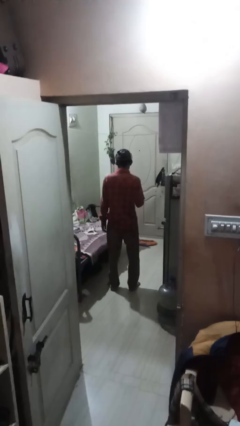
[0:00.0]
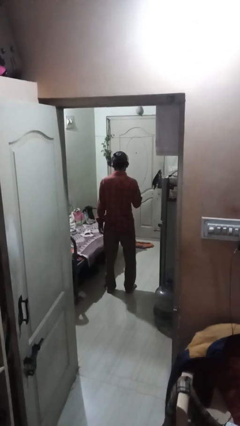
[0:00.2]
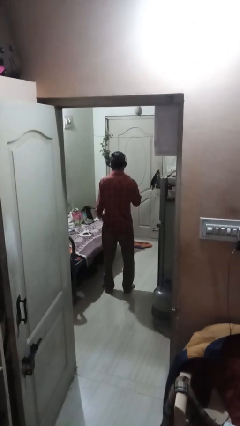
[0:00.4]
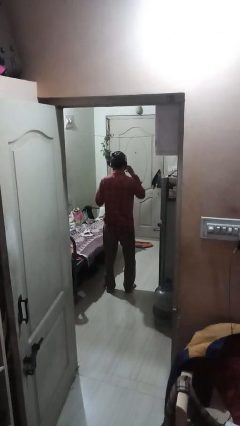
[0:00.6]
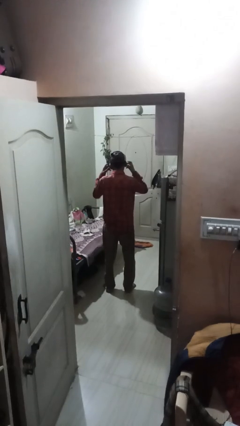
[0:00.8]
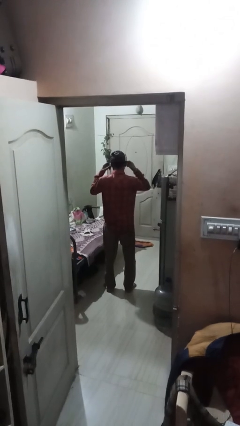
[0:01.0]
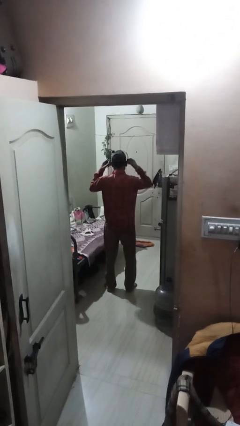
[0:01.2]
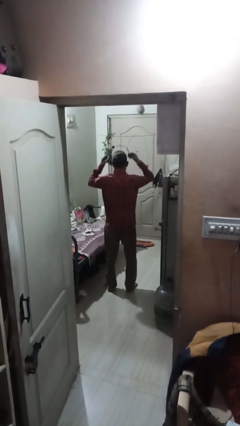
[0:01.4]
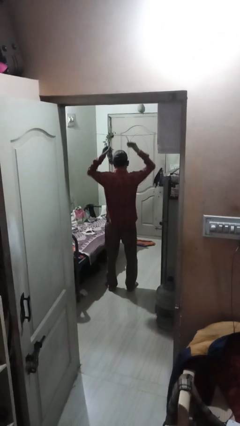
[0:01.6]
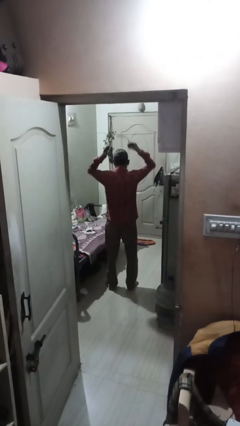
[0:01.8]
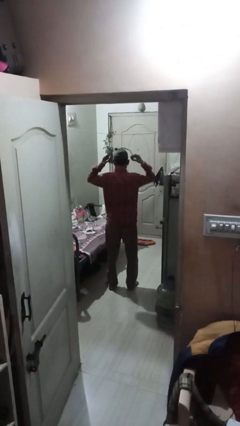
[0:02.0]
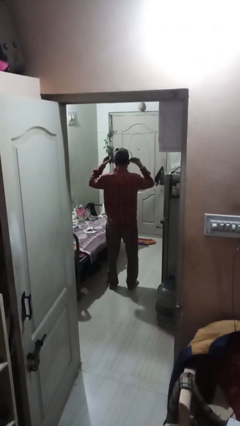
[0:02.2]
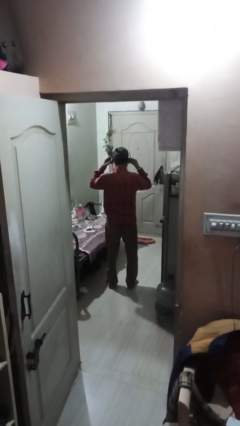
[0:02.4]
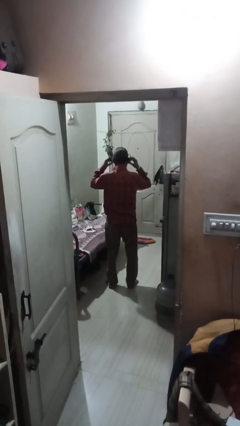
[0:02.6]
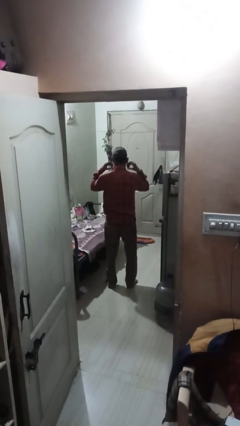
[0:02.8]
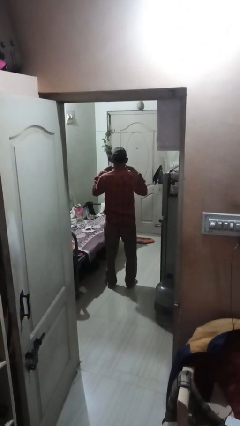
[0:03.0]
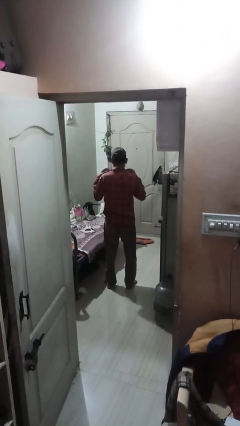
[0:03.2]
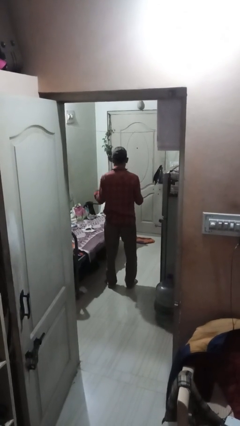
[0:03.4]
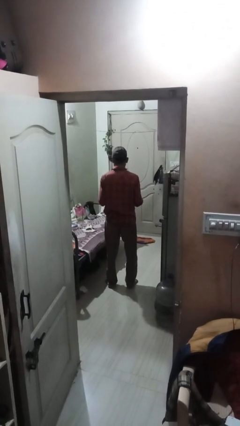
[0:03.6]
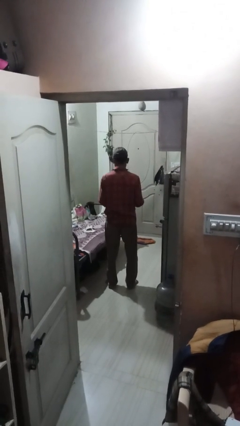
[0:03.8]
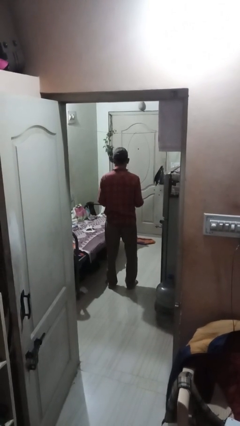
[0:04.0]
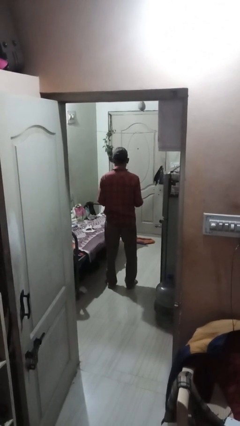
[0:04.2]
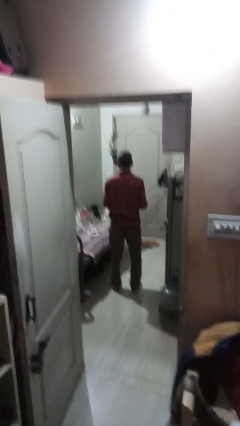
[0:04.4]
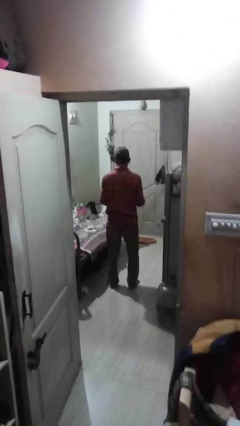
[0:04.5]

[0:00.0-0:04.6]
person takes off headphones

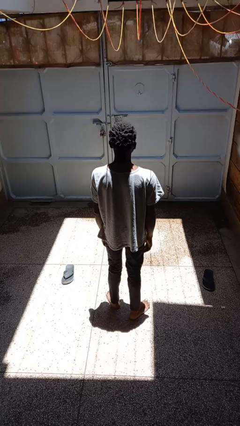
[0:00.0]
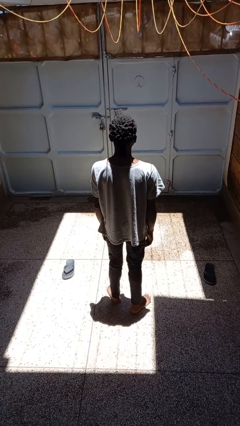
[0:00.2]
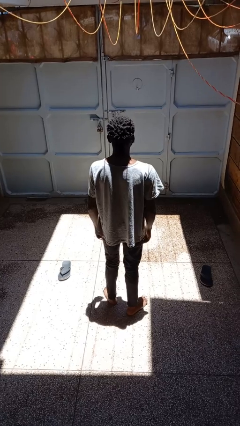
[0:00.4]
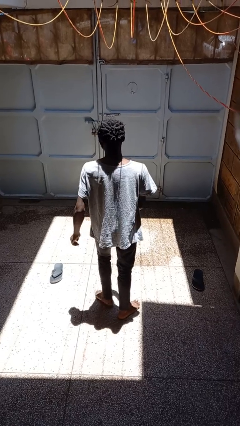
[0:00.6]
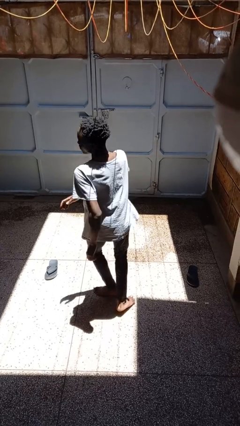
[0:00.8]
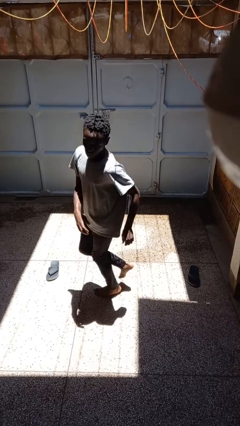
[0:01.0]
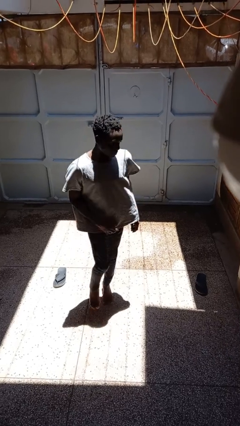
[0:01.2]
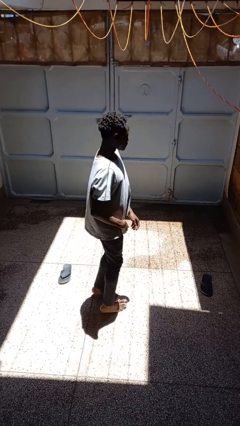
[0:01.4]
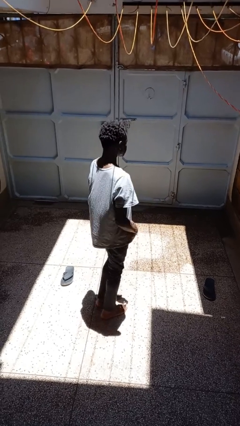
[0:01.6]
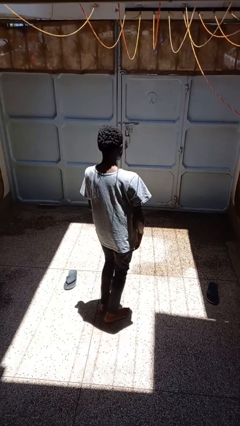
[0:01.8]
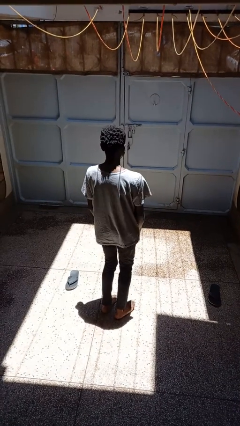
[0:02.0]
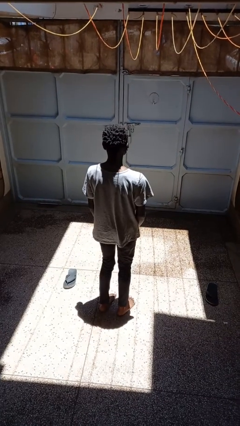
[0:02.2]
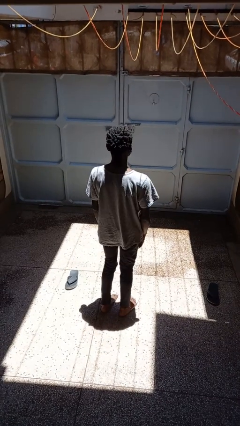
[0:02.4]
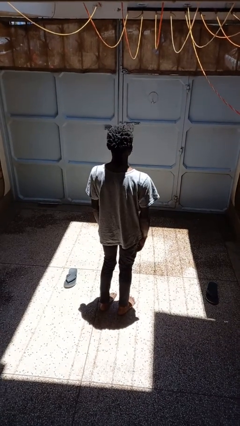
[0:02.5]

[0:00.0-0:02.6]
person twirls

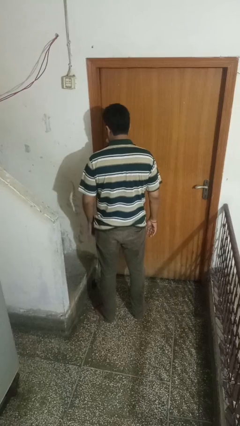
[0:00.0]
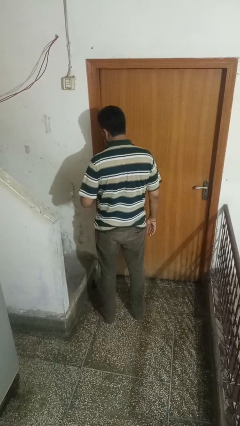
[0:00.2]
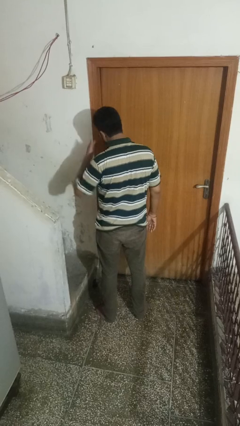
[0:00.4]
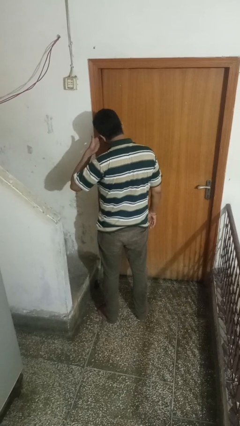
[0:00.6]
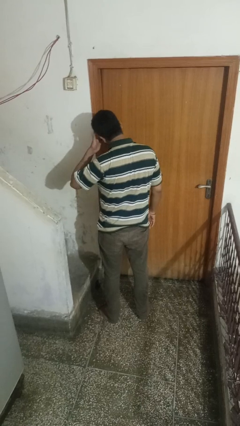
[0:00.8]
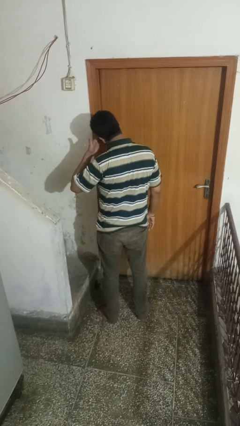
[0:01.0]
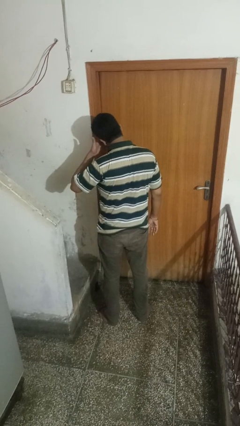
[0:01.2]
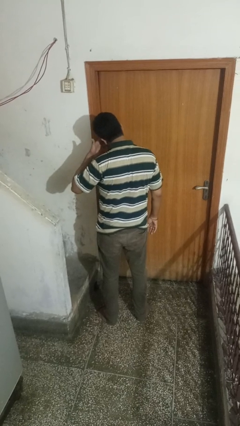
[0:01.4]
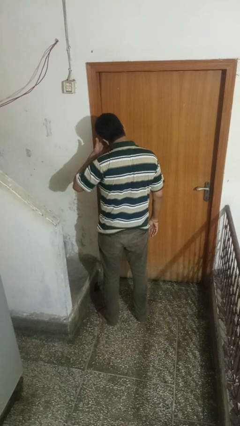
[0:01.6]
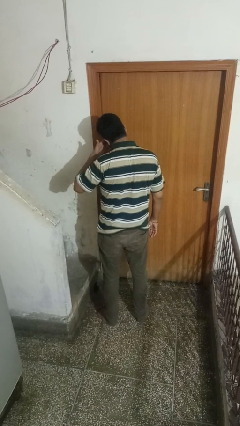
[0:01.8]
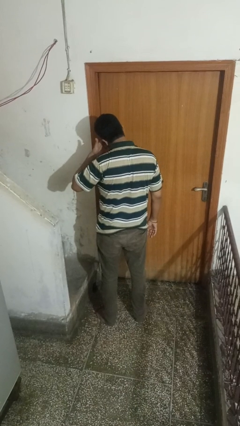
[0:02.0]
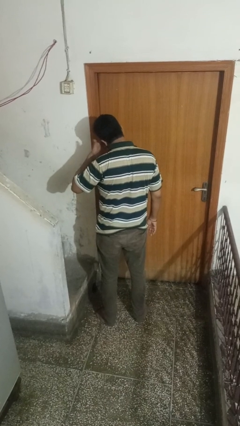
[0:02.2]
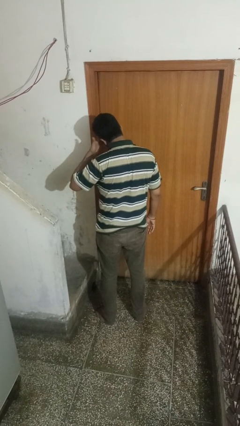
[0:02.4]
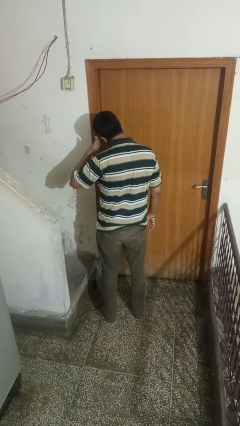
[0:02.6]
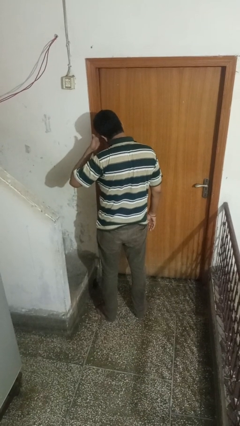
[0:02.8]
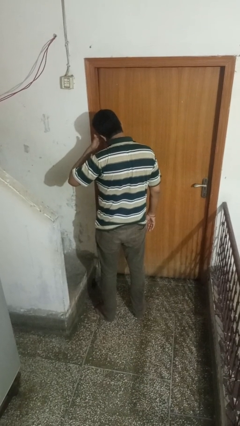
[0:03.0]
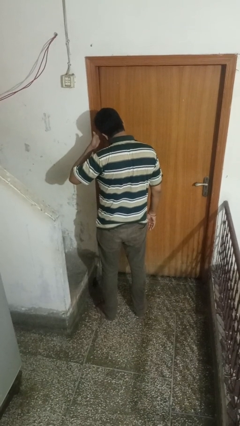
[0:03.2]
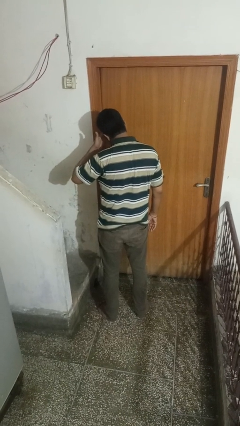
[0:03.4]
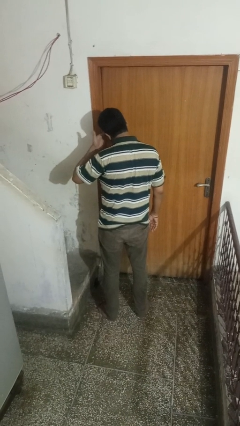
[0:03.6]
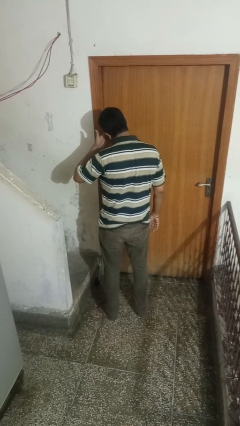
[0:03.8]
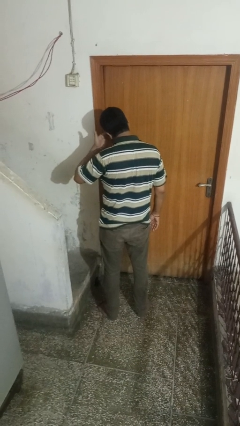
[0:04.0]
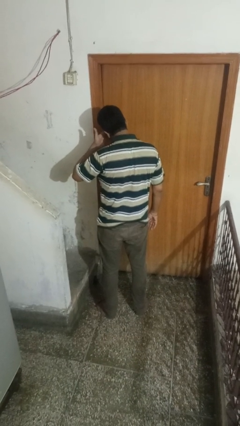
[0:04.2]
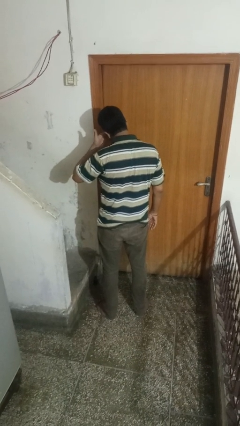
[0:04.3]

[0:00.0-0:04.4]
person rubs eyes

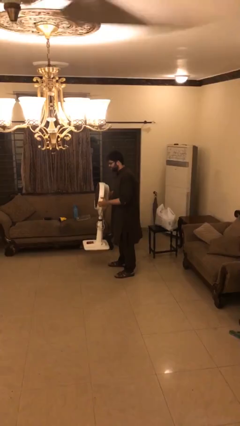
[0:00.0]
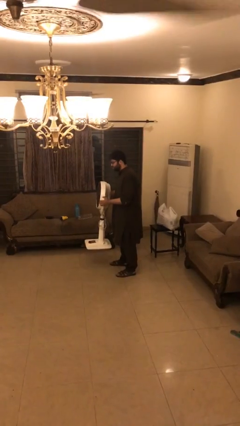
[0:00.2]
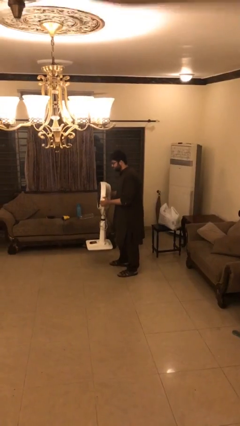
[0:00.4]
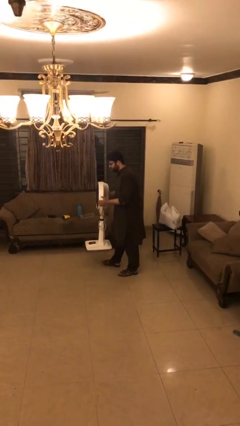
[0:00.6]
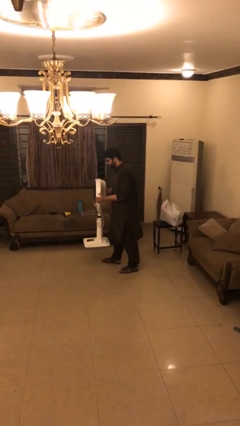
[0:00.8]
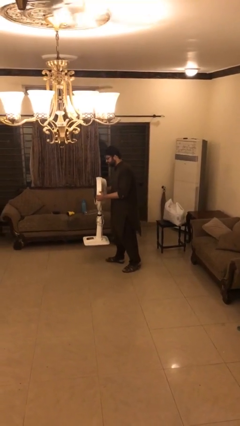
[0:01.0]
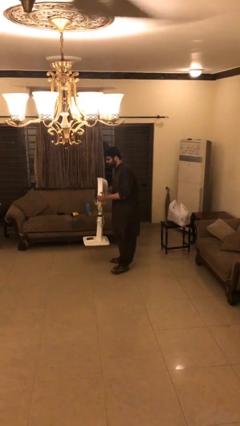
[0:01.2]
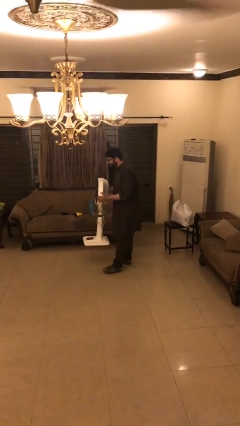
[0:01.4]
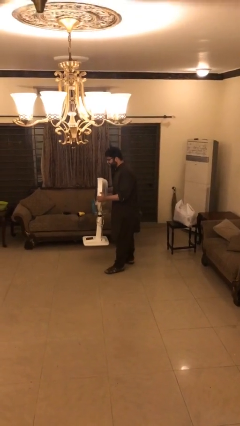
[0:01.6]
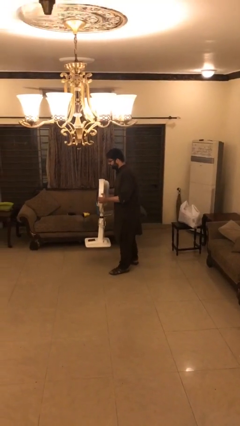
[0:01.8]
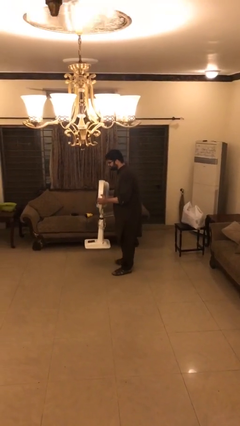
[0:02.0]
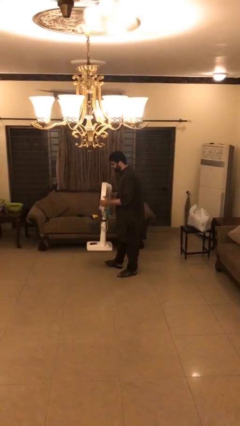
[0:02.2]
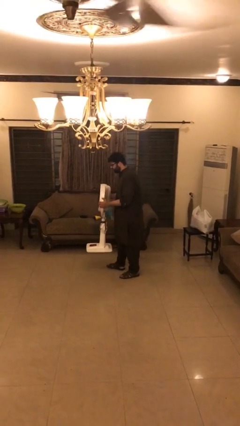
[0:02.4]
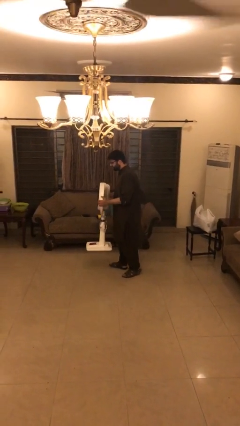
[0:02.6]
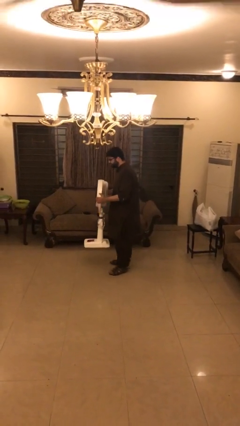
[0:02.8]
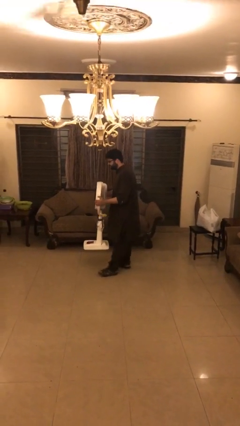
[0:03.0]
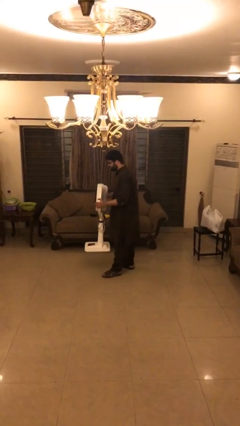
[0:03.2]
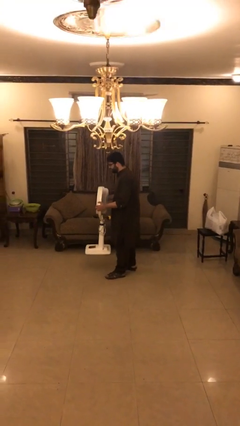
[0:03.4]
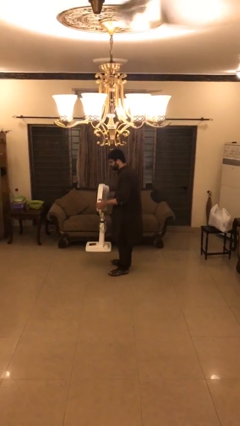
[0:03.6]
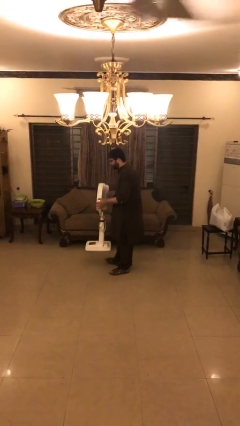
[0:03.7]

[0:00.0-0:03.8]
person carries heavy object

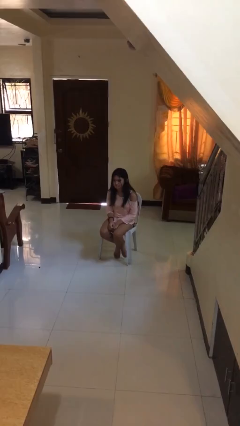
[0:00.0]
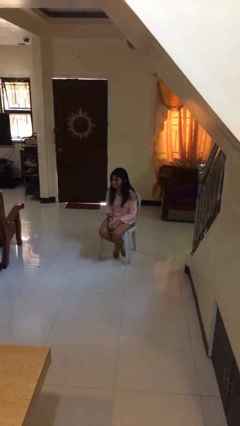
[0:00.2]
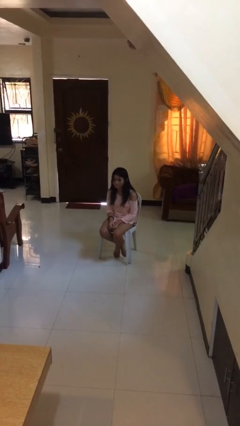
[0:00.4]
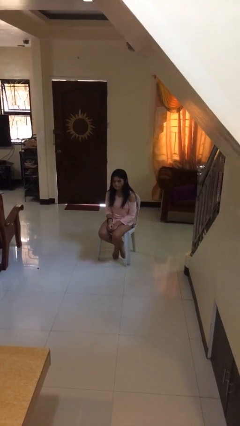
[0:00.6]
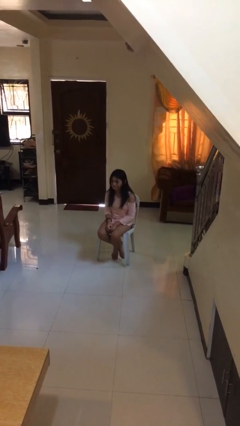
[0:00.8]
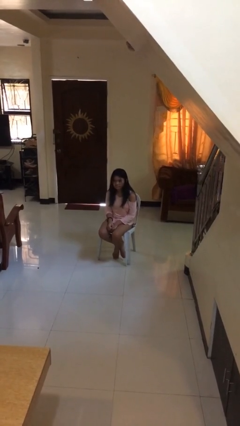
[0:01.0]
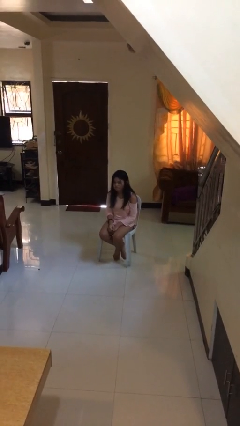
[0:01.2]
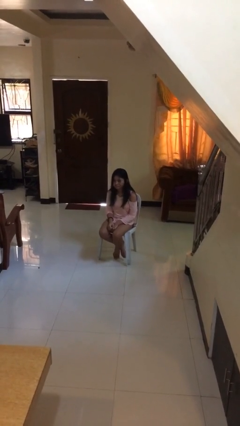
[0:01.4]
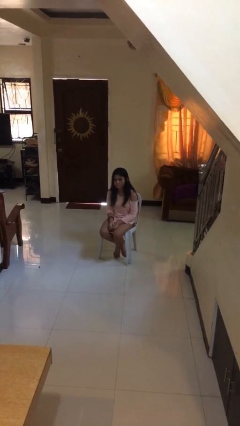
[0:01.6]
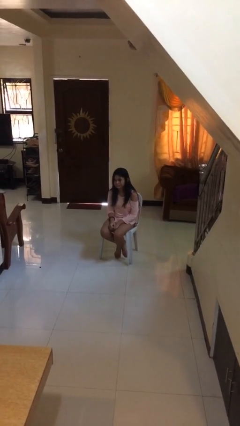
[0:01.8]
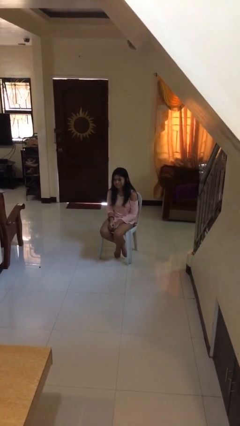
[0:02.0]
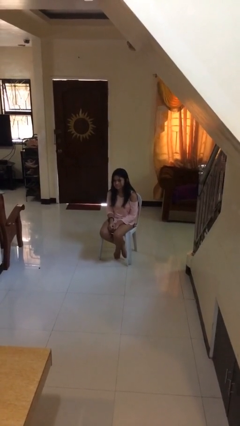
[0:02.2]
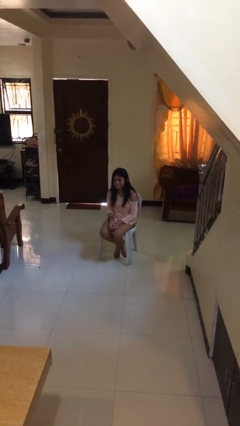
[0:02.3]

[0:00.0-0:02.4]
person shakes head
